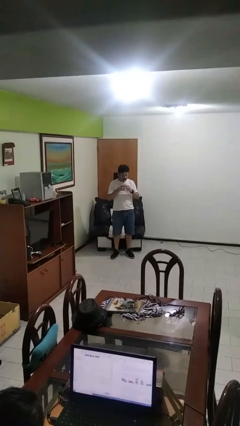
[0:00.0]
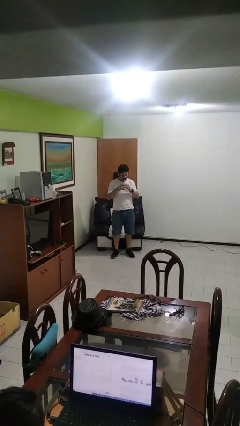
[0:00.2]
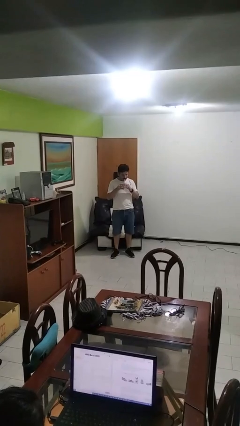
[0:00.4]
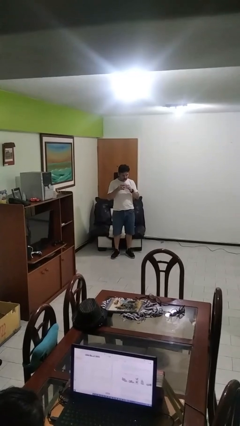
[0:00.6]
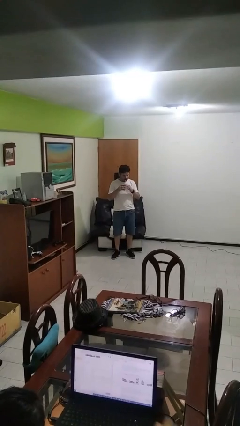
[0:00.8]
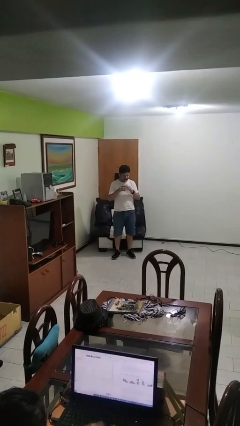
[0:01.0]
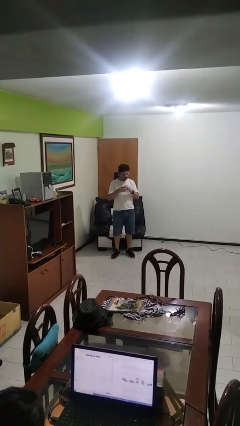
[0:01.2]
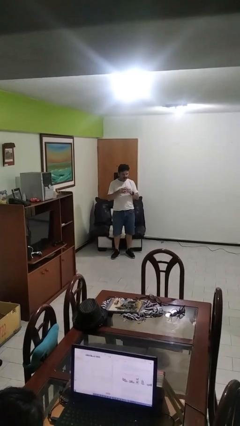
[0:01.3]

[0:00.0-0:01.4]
person drinks from straw

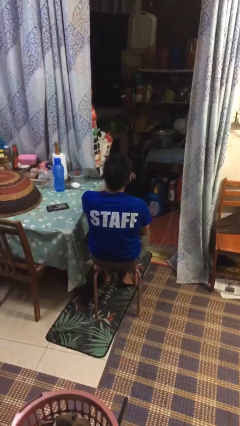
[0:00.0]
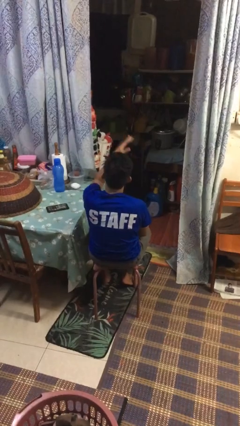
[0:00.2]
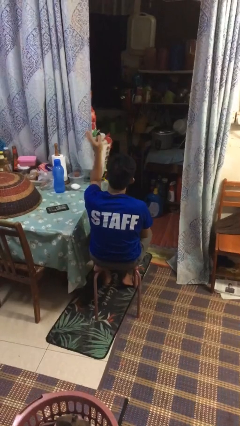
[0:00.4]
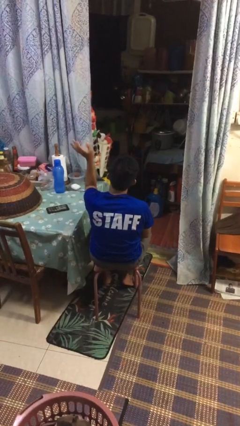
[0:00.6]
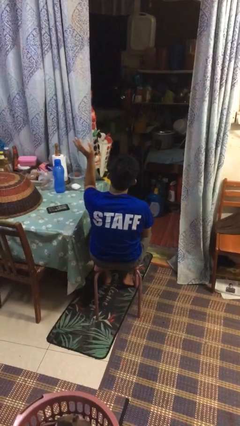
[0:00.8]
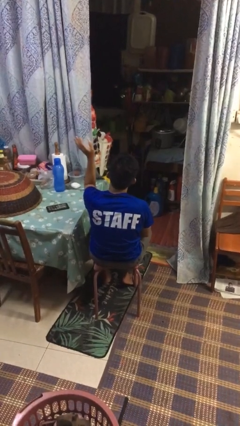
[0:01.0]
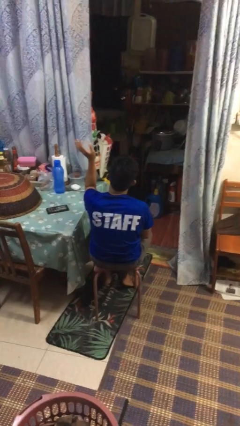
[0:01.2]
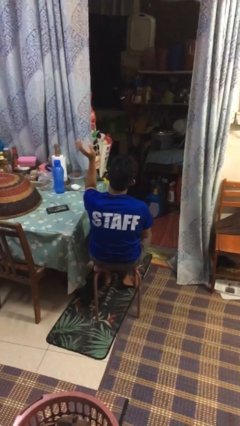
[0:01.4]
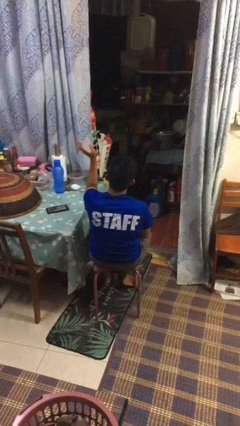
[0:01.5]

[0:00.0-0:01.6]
person gestures swipe left

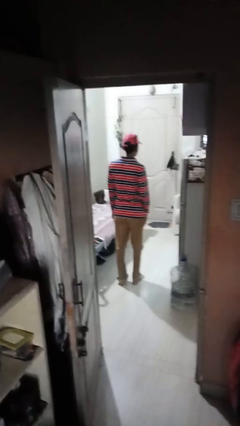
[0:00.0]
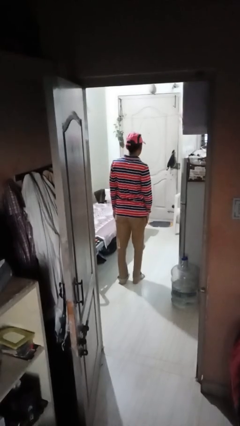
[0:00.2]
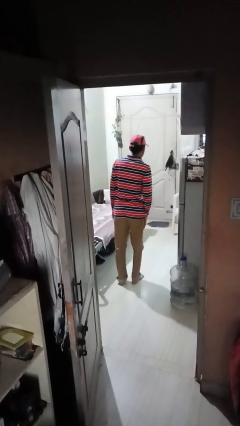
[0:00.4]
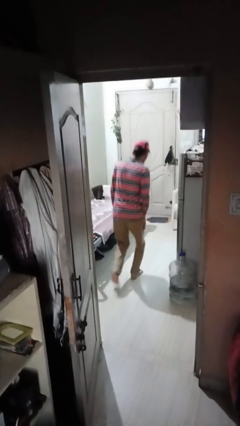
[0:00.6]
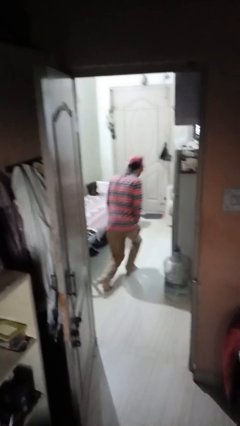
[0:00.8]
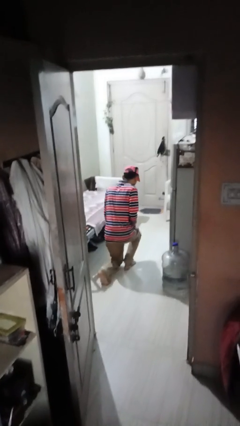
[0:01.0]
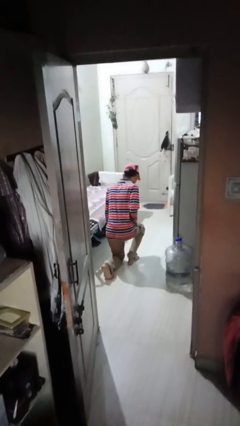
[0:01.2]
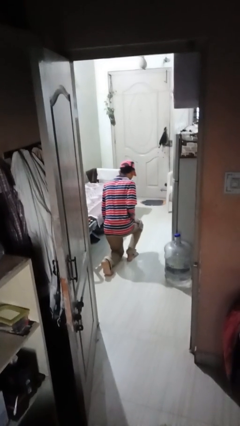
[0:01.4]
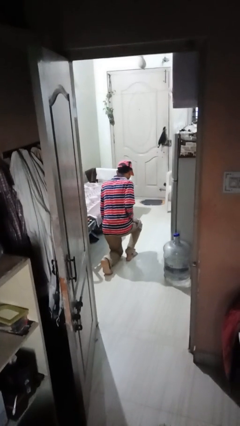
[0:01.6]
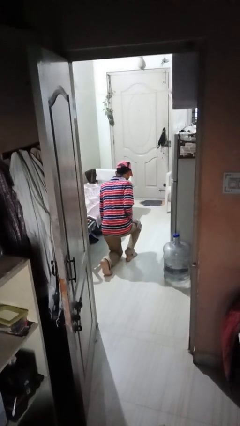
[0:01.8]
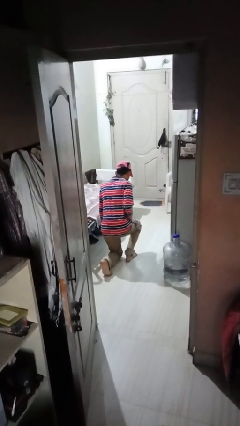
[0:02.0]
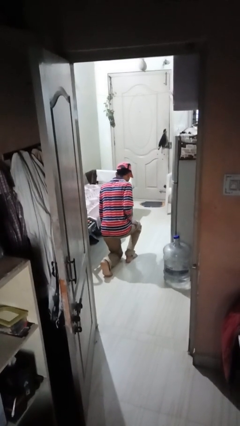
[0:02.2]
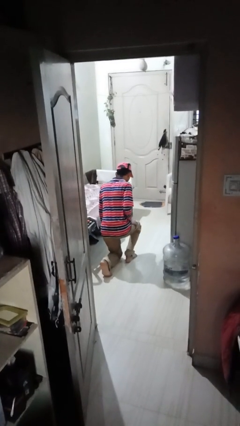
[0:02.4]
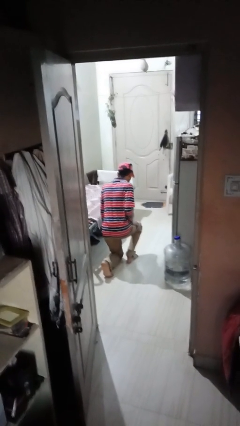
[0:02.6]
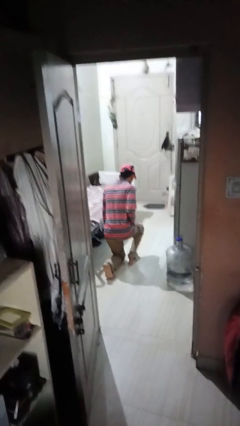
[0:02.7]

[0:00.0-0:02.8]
person kneels

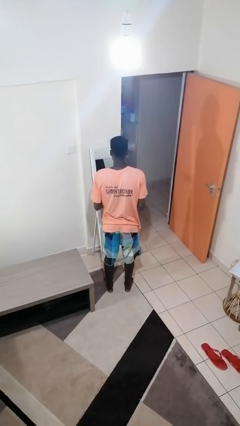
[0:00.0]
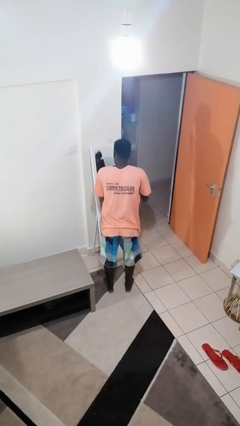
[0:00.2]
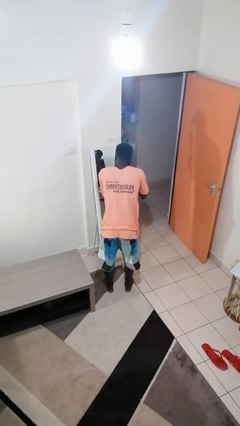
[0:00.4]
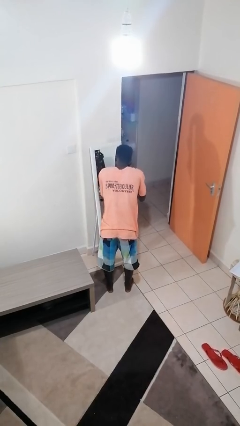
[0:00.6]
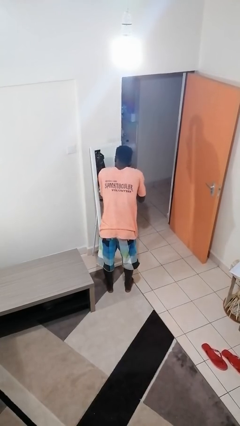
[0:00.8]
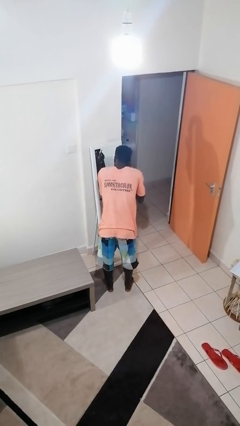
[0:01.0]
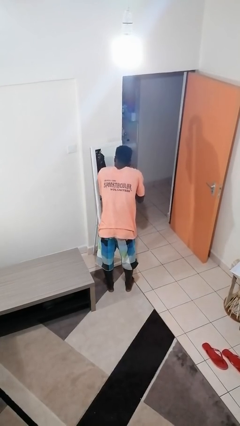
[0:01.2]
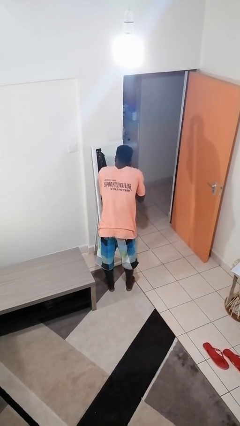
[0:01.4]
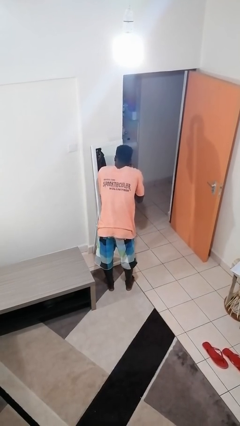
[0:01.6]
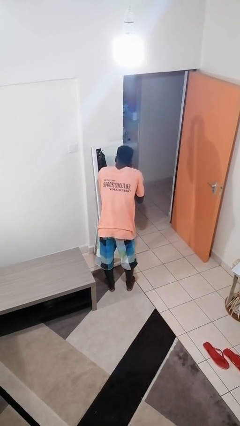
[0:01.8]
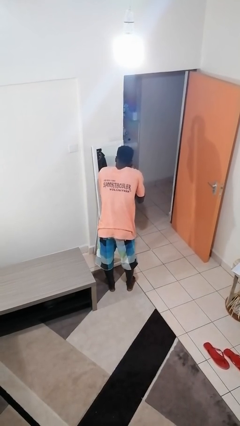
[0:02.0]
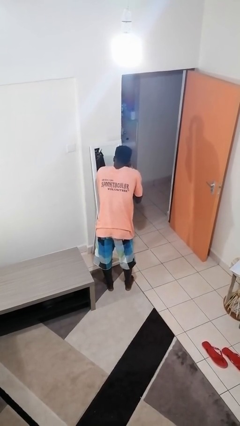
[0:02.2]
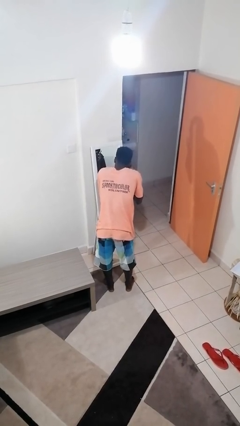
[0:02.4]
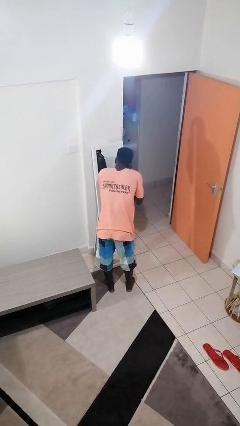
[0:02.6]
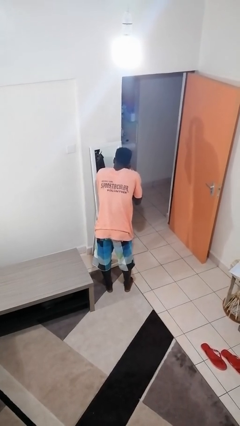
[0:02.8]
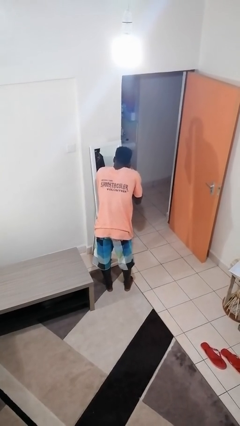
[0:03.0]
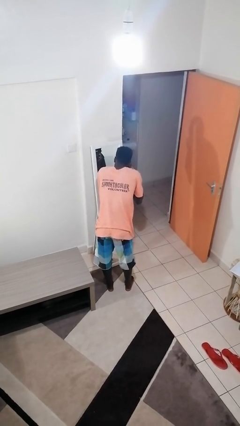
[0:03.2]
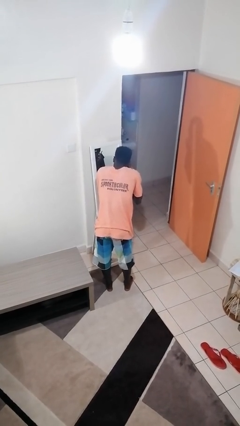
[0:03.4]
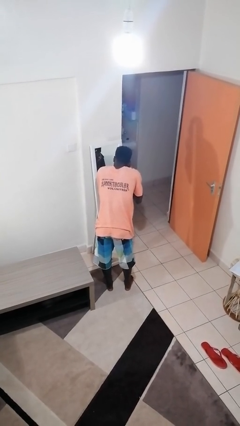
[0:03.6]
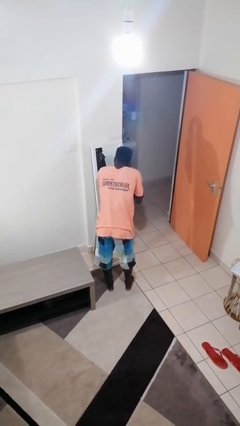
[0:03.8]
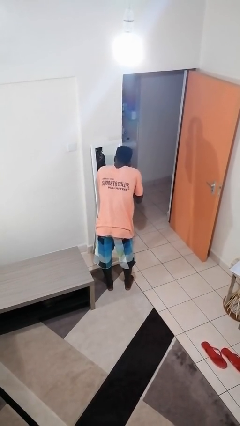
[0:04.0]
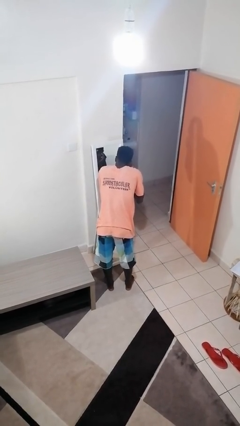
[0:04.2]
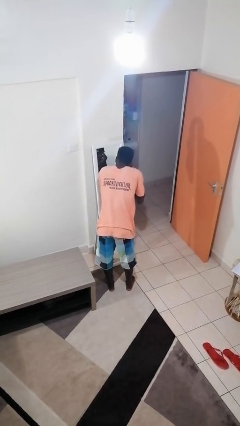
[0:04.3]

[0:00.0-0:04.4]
person applies eye makeup

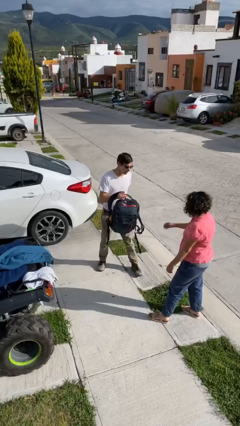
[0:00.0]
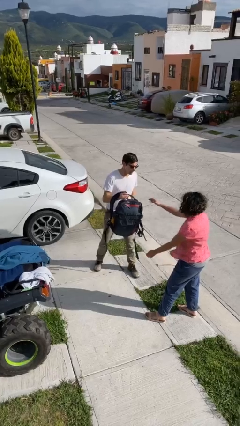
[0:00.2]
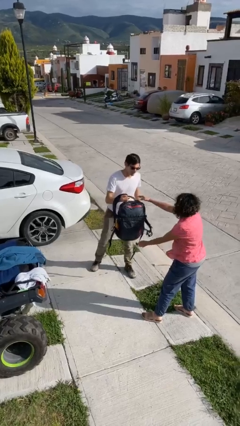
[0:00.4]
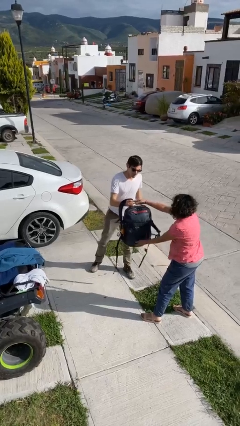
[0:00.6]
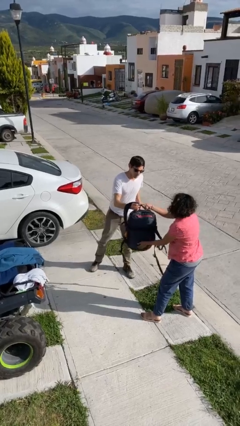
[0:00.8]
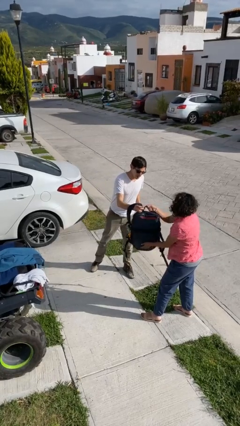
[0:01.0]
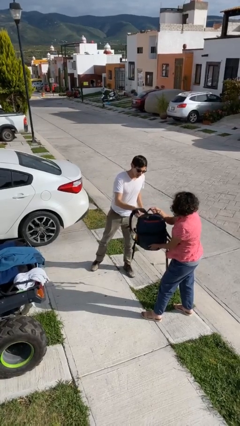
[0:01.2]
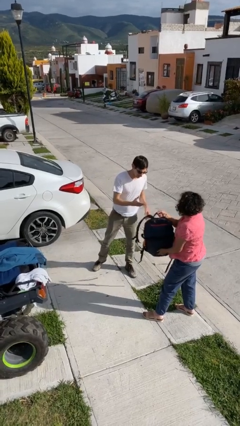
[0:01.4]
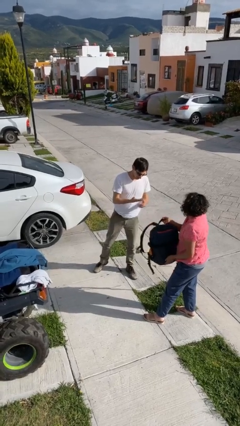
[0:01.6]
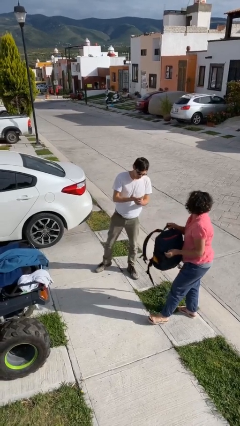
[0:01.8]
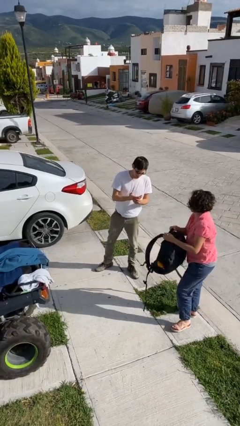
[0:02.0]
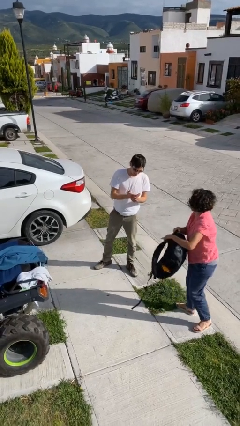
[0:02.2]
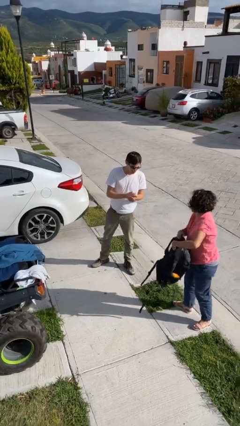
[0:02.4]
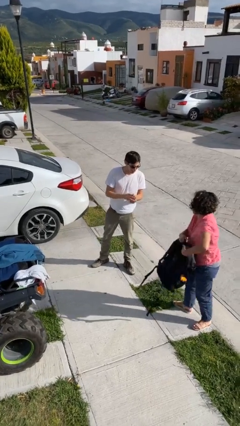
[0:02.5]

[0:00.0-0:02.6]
person transfers object to person

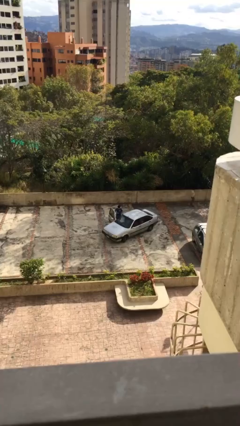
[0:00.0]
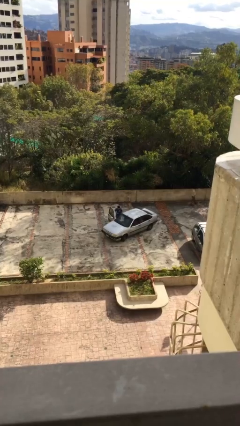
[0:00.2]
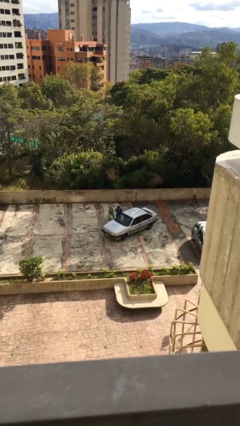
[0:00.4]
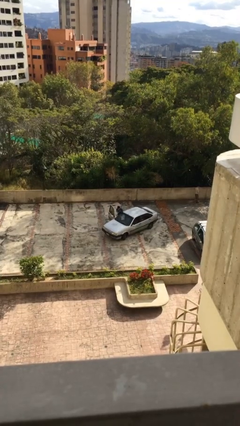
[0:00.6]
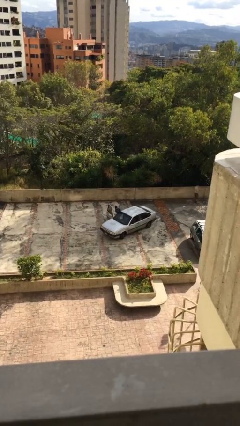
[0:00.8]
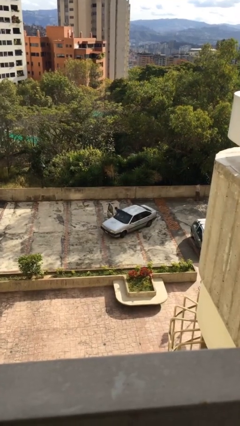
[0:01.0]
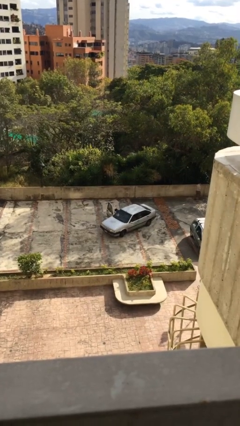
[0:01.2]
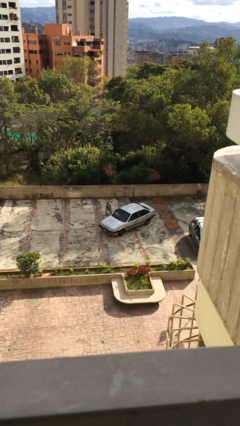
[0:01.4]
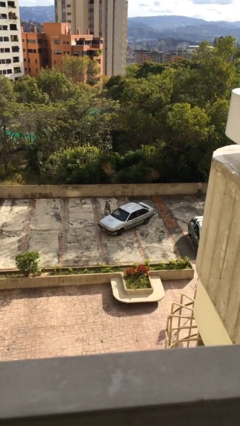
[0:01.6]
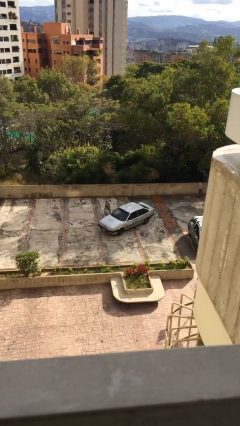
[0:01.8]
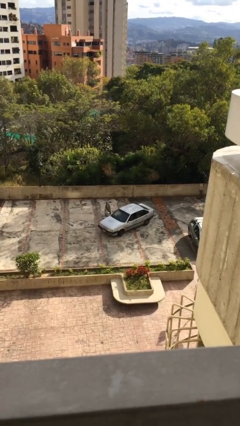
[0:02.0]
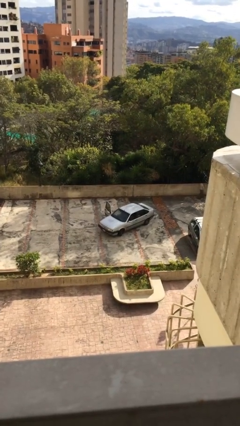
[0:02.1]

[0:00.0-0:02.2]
person enters car

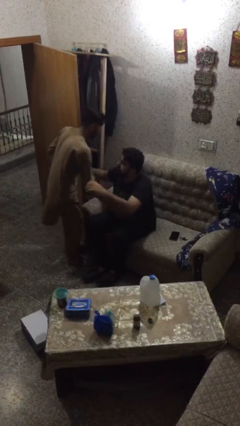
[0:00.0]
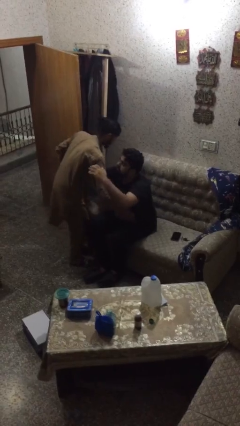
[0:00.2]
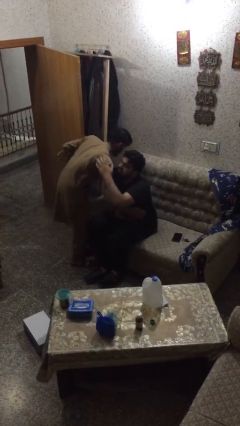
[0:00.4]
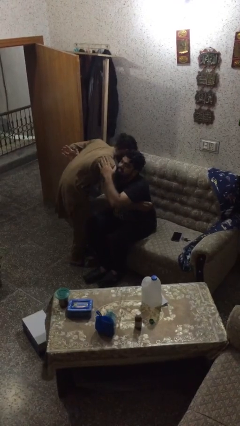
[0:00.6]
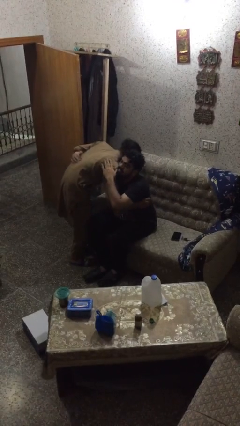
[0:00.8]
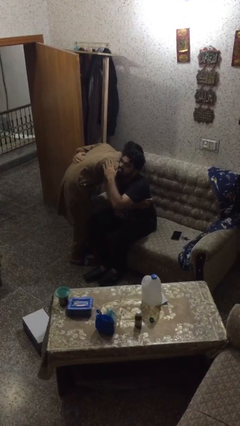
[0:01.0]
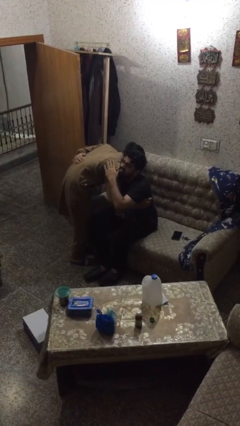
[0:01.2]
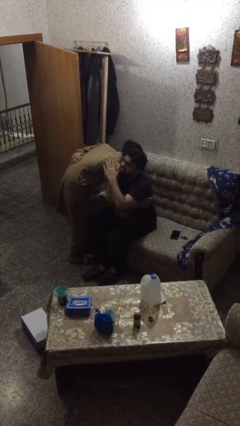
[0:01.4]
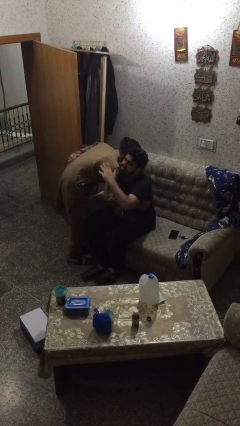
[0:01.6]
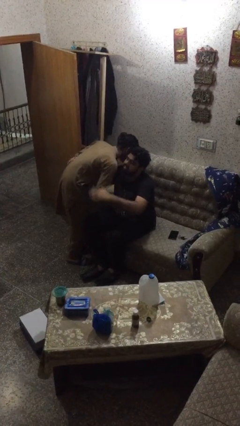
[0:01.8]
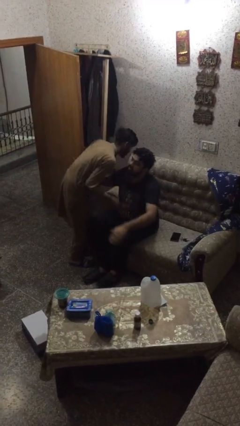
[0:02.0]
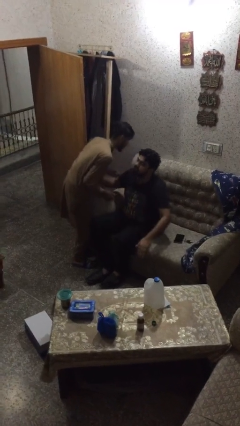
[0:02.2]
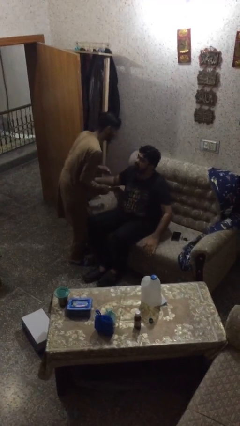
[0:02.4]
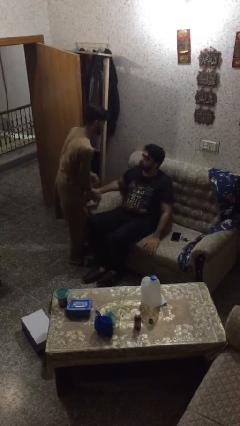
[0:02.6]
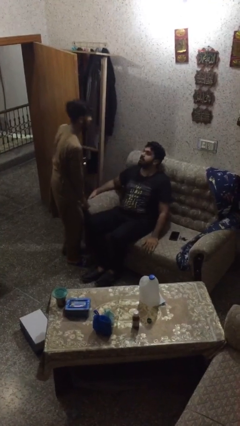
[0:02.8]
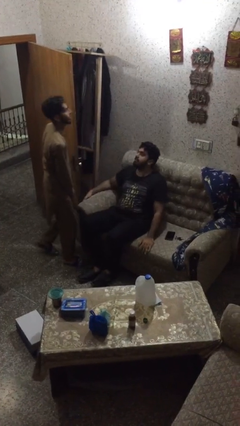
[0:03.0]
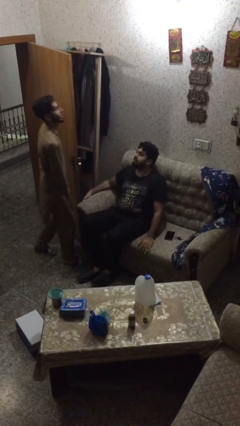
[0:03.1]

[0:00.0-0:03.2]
person embraces person
